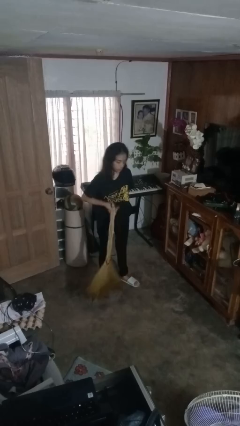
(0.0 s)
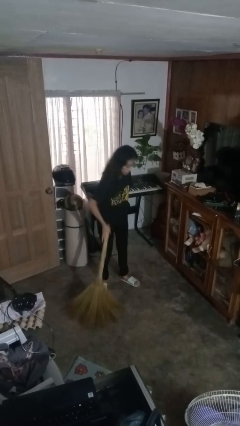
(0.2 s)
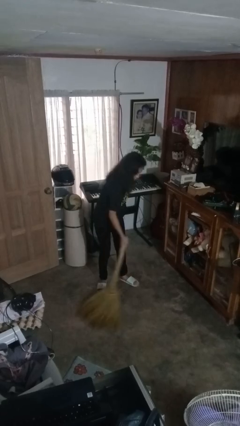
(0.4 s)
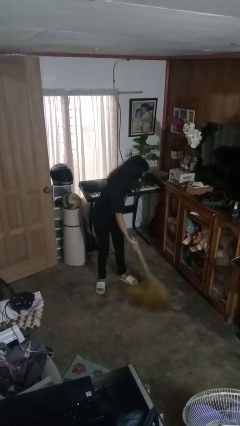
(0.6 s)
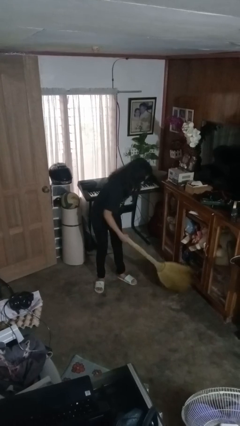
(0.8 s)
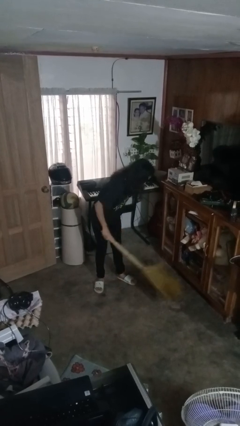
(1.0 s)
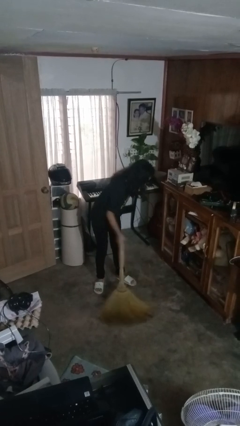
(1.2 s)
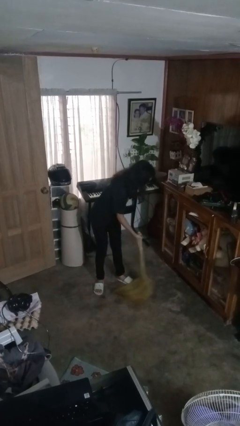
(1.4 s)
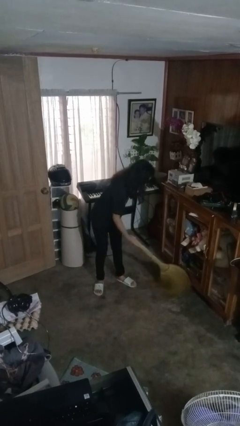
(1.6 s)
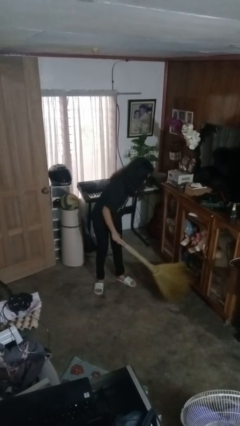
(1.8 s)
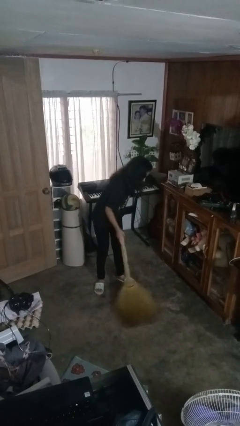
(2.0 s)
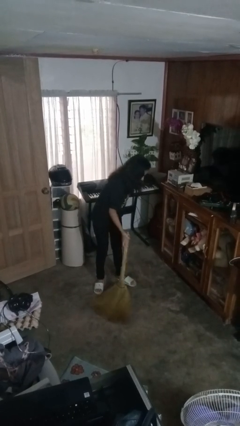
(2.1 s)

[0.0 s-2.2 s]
person sweeps floor

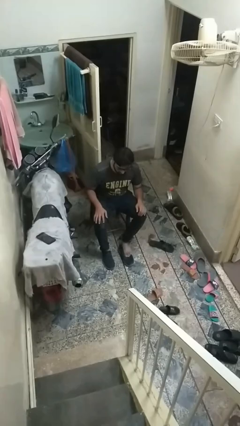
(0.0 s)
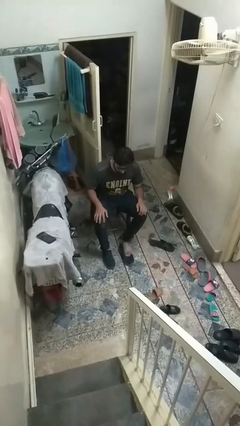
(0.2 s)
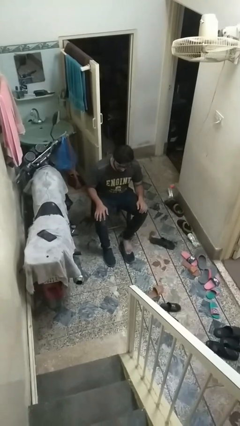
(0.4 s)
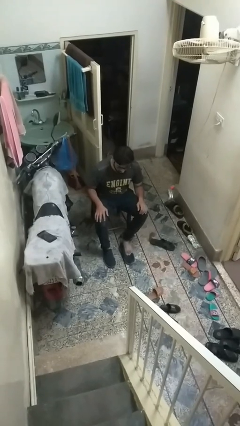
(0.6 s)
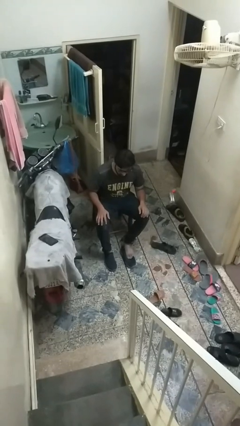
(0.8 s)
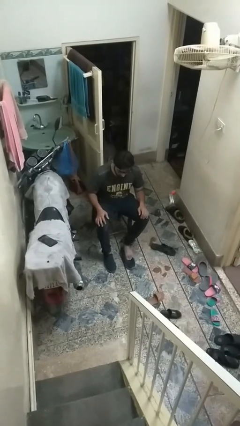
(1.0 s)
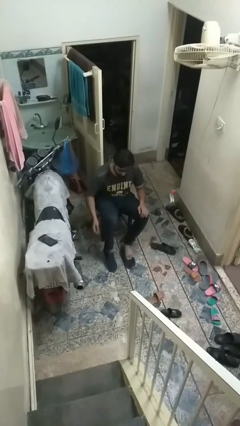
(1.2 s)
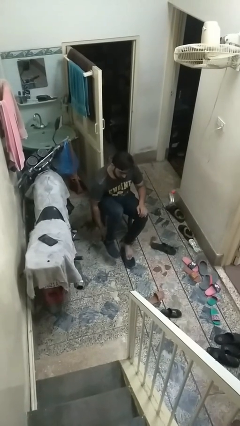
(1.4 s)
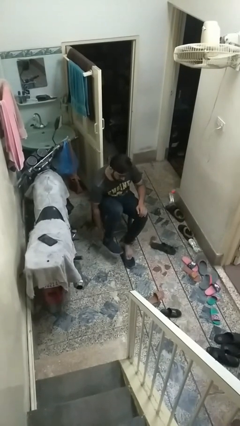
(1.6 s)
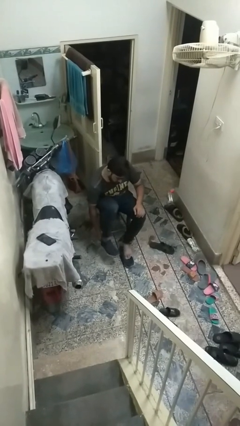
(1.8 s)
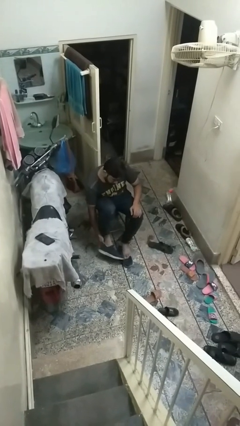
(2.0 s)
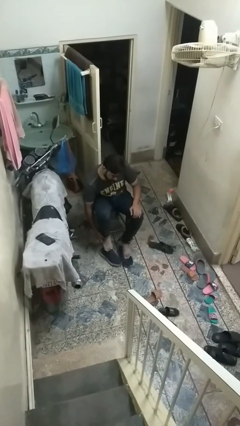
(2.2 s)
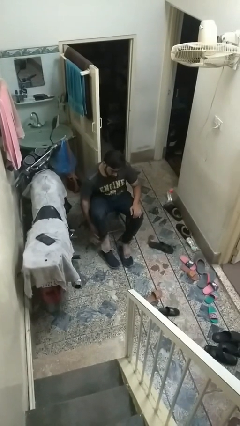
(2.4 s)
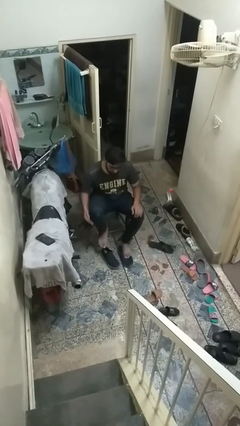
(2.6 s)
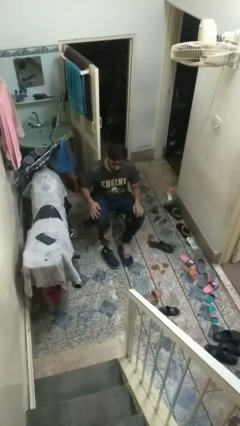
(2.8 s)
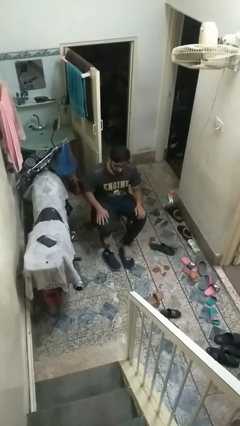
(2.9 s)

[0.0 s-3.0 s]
person takes off shoes

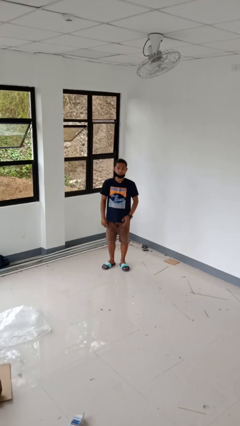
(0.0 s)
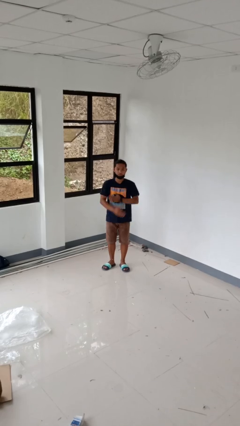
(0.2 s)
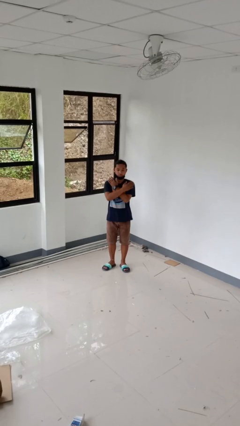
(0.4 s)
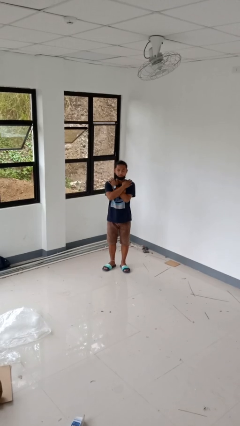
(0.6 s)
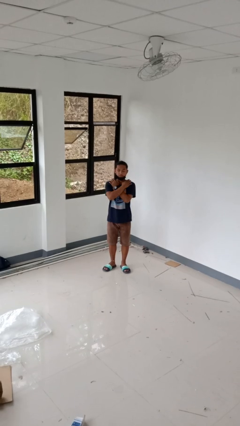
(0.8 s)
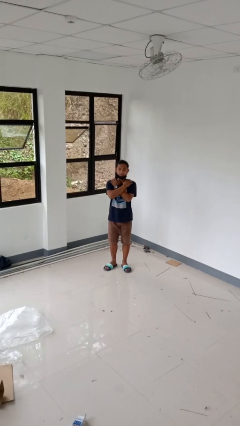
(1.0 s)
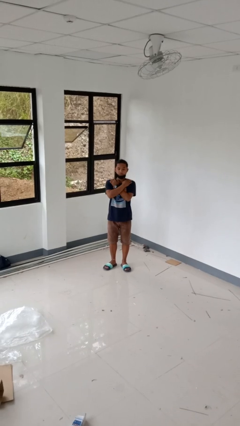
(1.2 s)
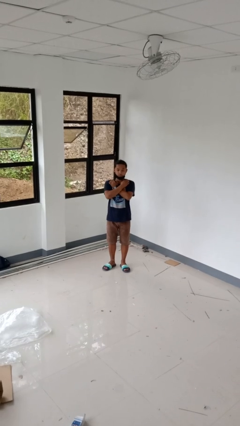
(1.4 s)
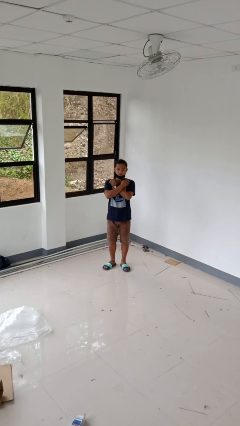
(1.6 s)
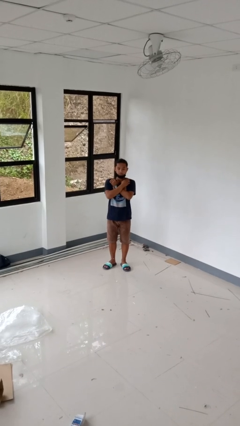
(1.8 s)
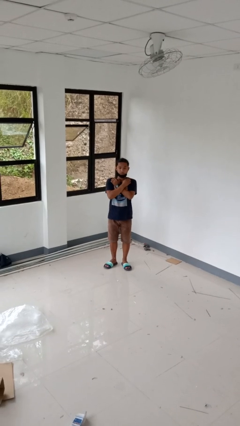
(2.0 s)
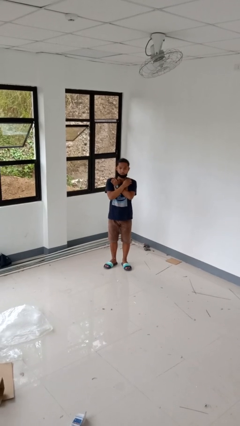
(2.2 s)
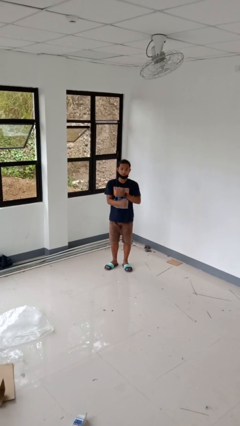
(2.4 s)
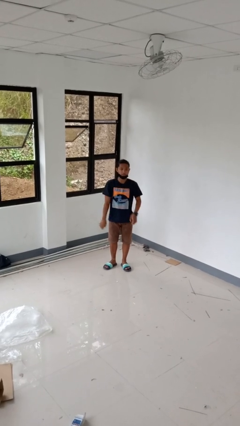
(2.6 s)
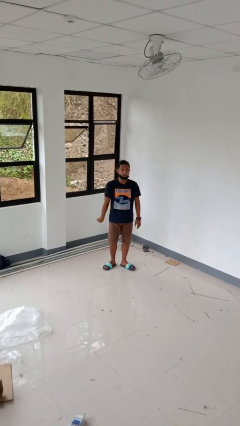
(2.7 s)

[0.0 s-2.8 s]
person gestures arms x

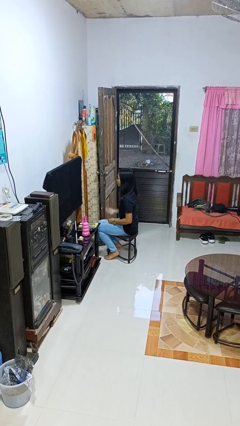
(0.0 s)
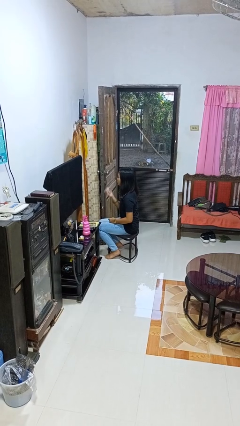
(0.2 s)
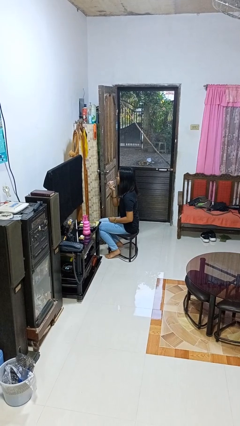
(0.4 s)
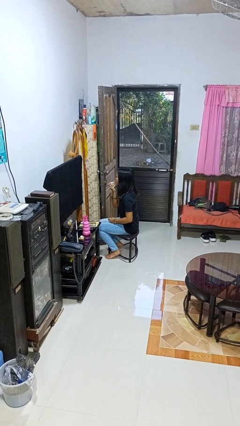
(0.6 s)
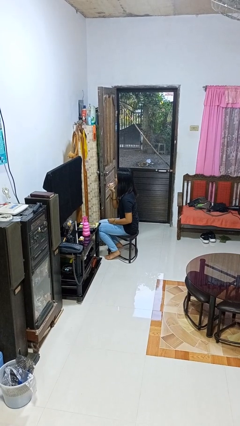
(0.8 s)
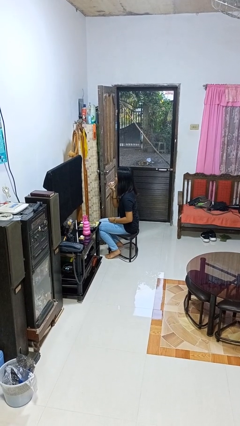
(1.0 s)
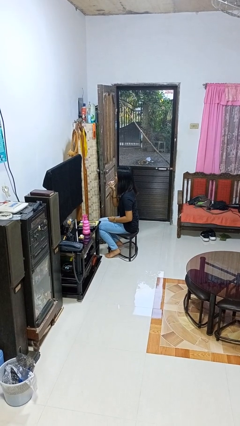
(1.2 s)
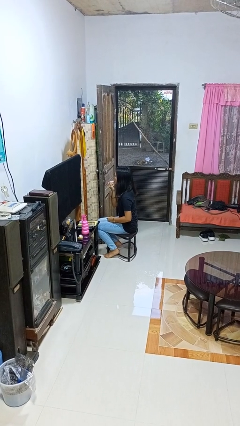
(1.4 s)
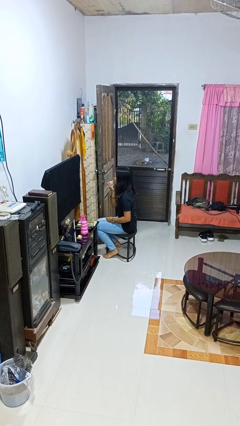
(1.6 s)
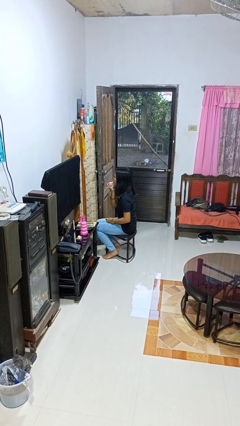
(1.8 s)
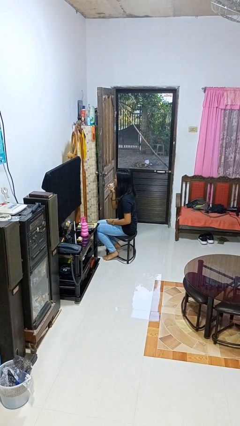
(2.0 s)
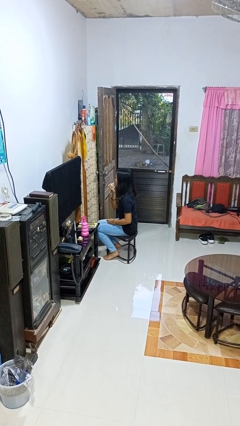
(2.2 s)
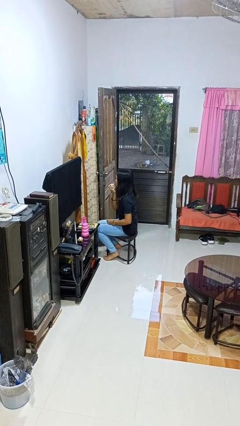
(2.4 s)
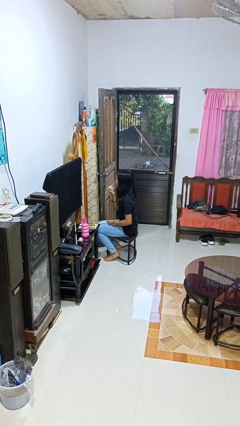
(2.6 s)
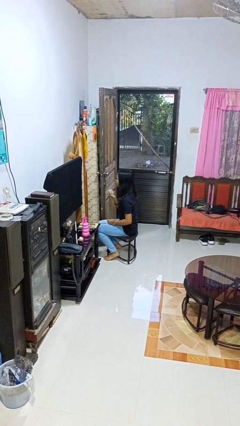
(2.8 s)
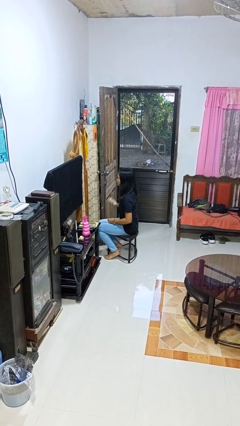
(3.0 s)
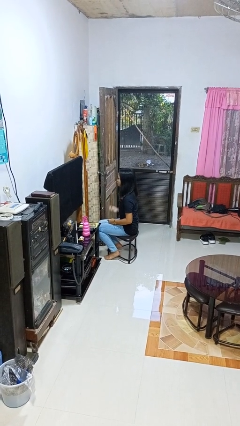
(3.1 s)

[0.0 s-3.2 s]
person applies lip makeup

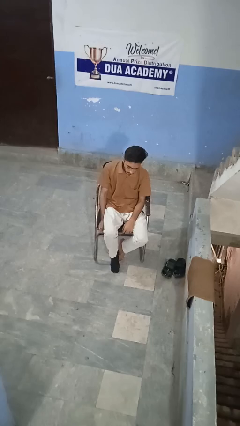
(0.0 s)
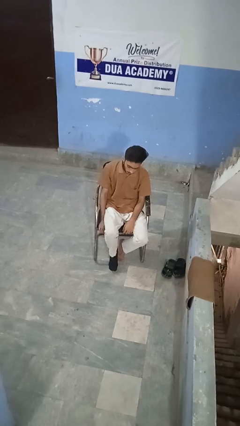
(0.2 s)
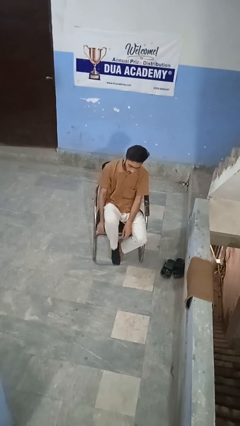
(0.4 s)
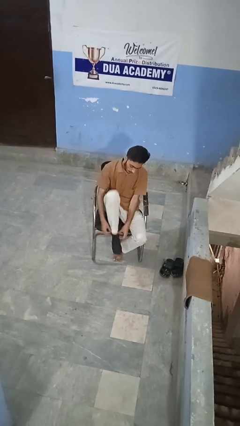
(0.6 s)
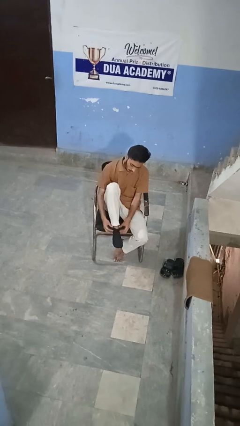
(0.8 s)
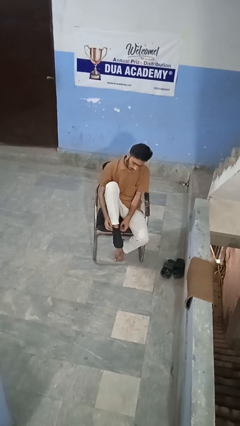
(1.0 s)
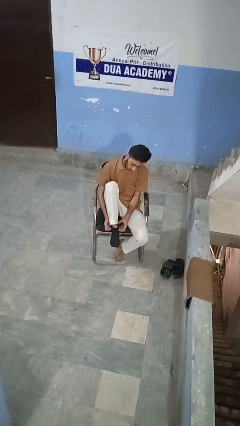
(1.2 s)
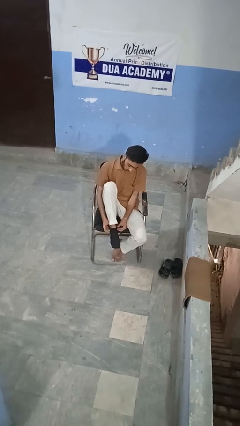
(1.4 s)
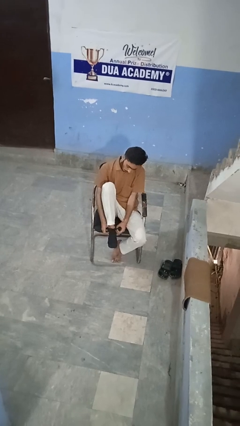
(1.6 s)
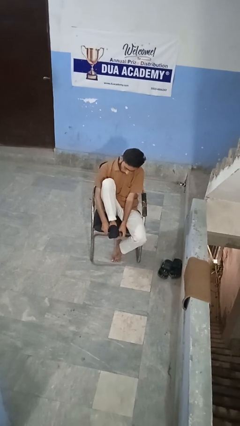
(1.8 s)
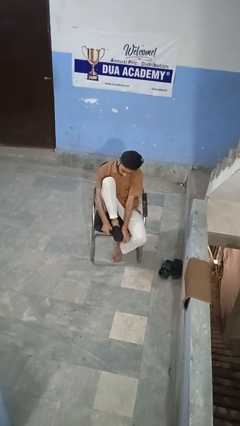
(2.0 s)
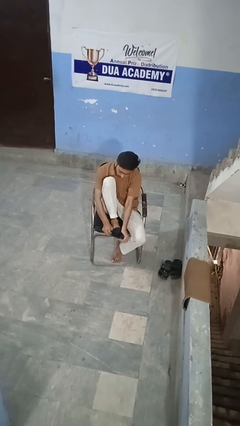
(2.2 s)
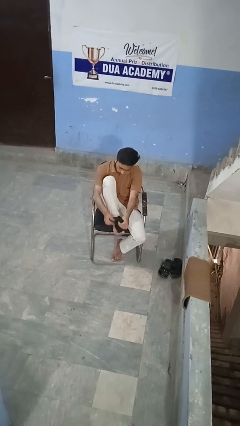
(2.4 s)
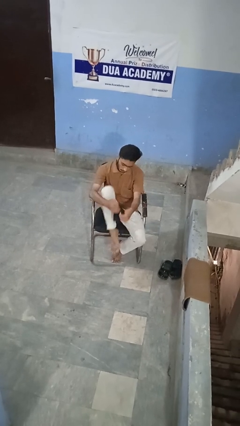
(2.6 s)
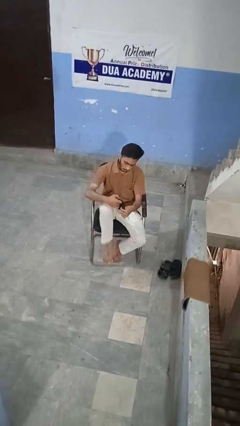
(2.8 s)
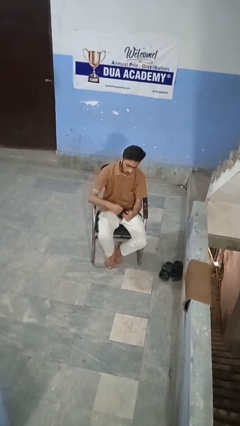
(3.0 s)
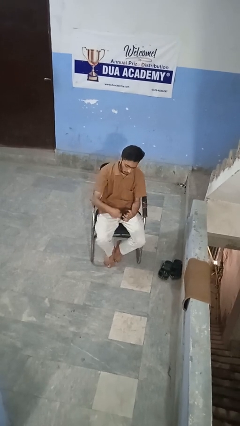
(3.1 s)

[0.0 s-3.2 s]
person takes off socks

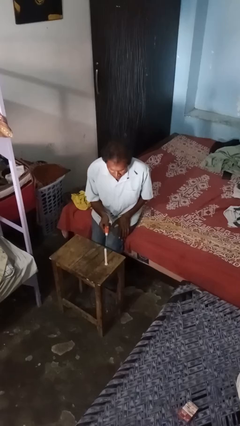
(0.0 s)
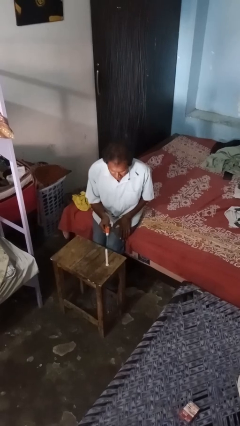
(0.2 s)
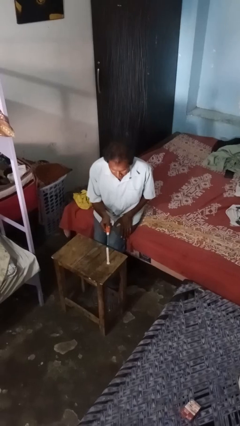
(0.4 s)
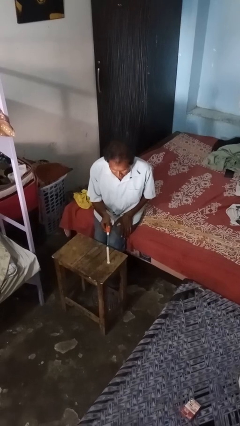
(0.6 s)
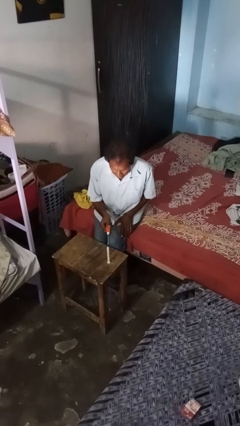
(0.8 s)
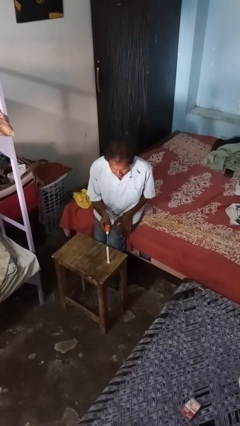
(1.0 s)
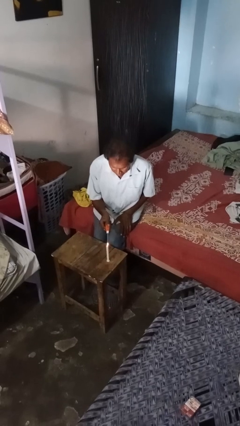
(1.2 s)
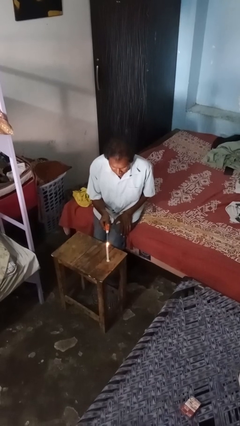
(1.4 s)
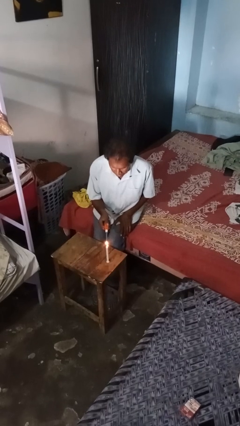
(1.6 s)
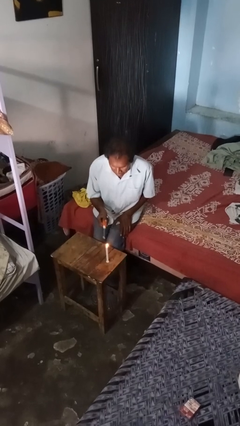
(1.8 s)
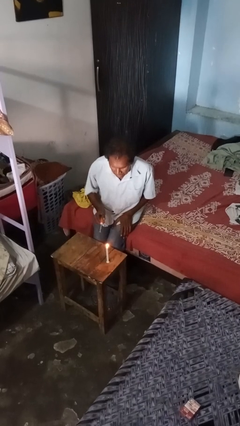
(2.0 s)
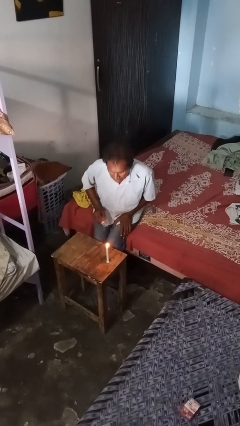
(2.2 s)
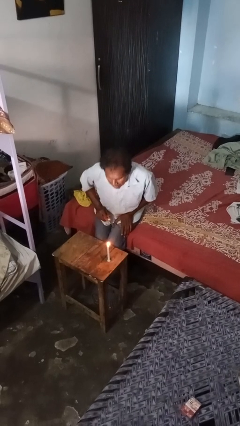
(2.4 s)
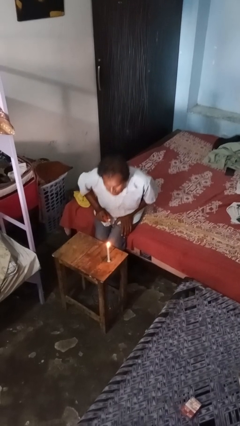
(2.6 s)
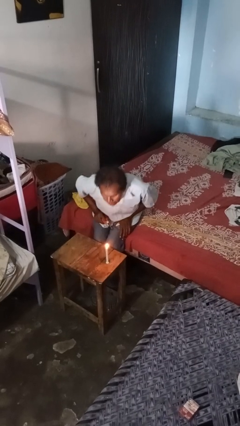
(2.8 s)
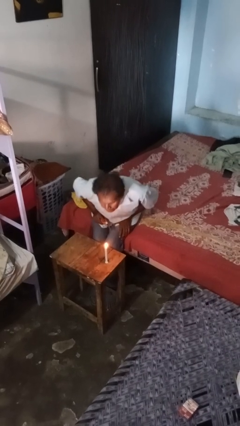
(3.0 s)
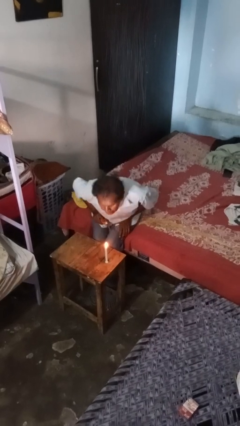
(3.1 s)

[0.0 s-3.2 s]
person lights candle
